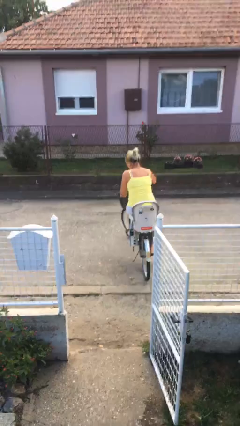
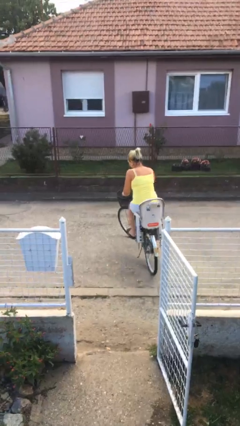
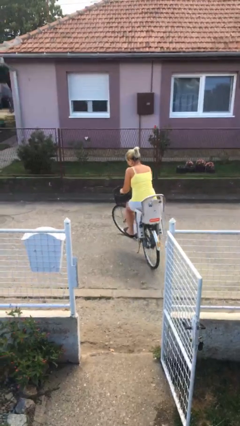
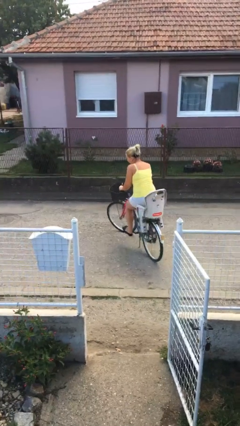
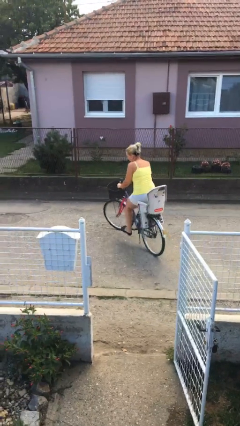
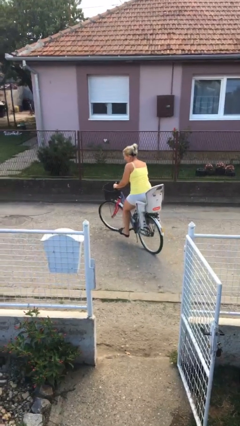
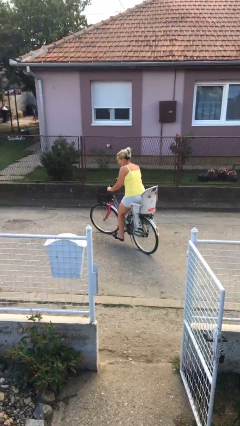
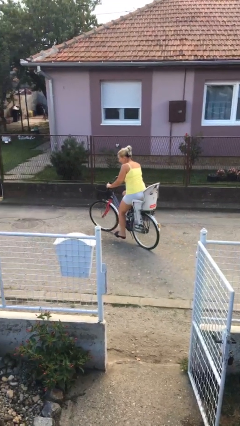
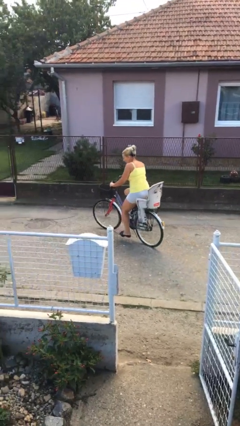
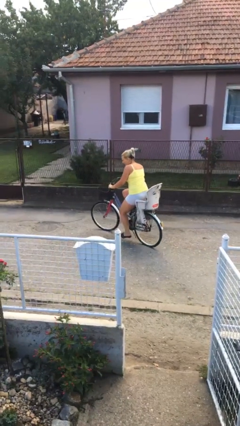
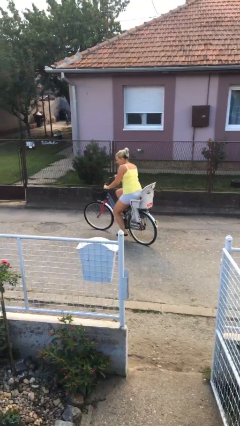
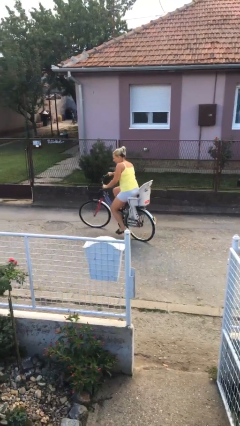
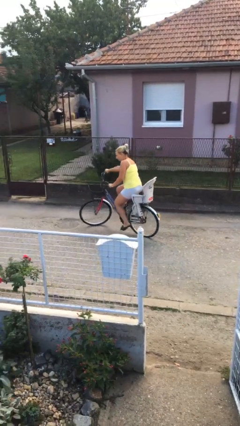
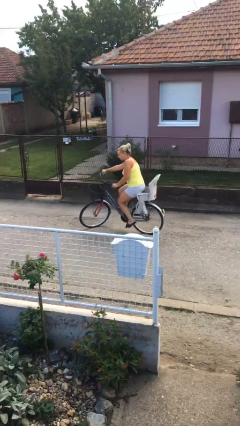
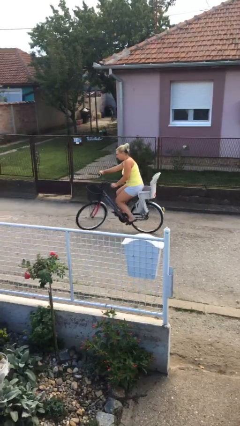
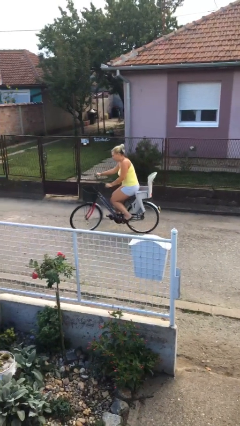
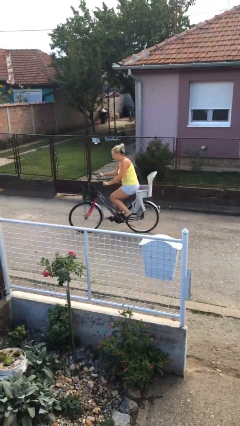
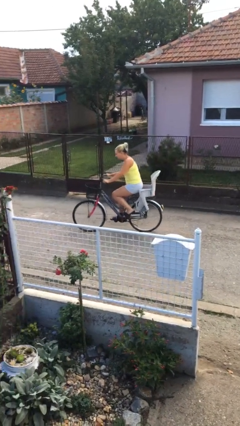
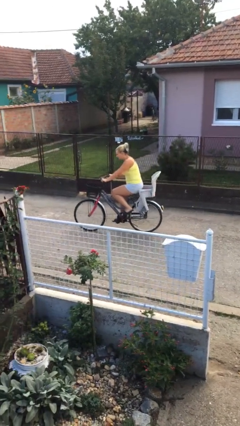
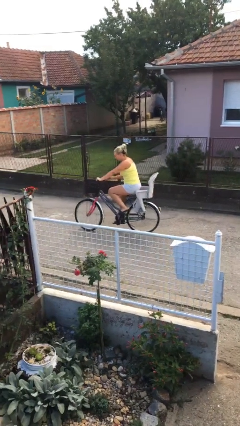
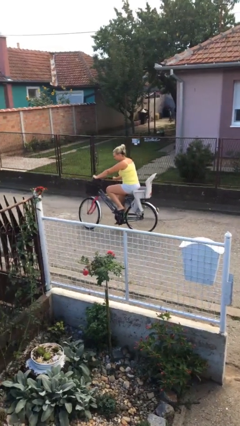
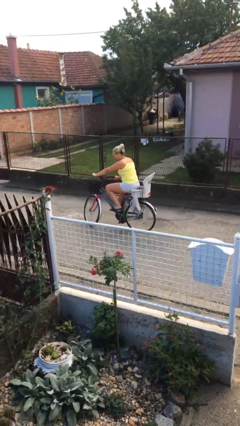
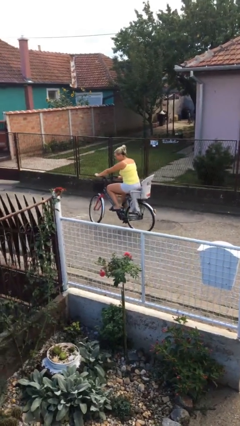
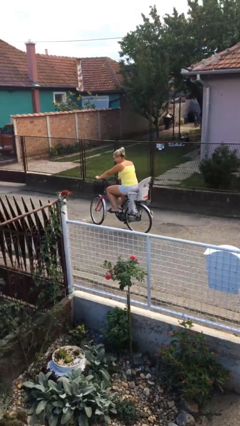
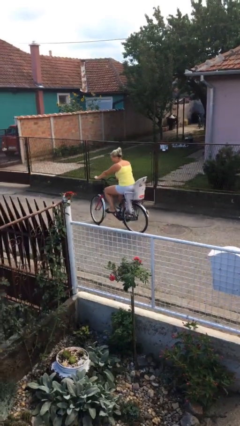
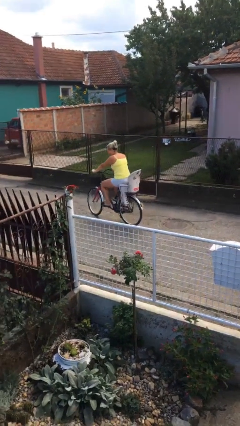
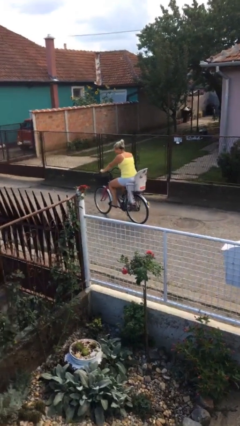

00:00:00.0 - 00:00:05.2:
person rides bicycle

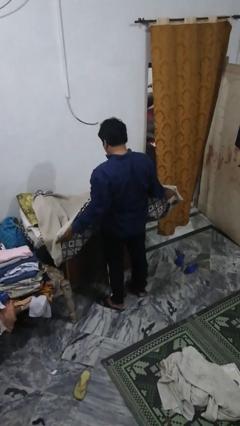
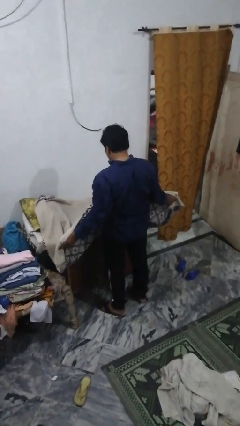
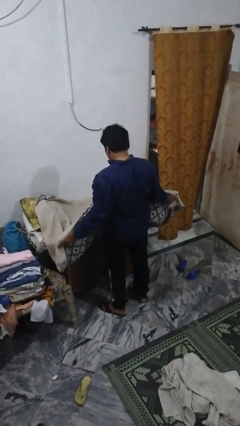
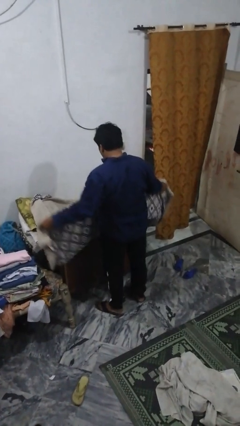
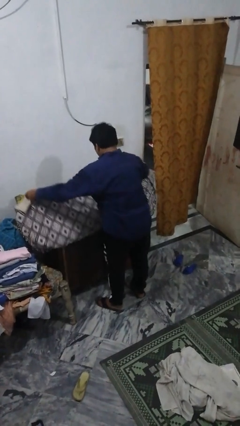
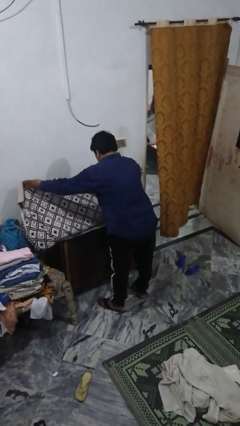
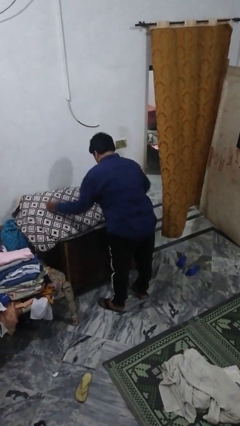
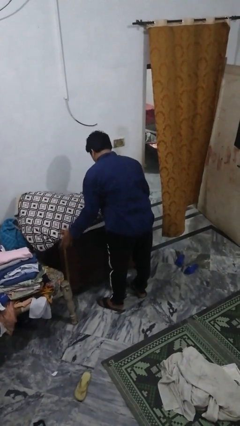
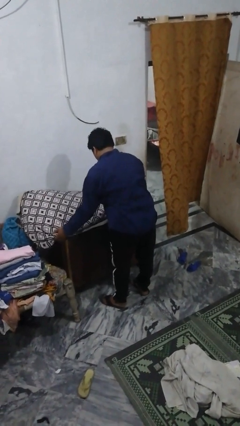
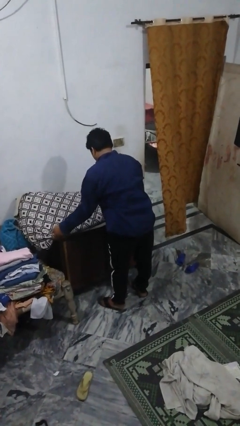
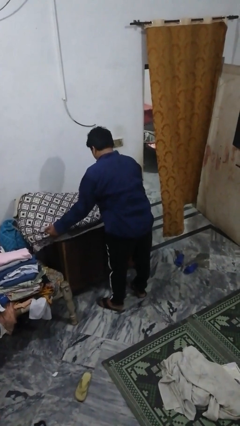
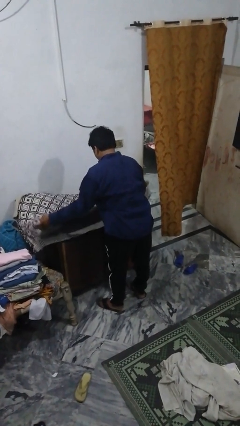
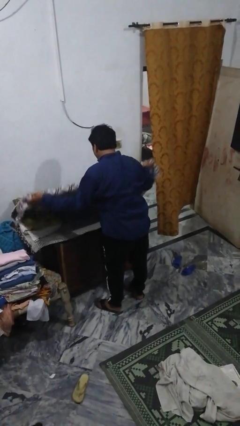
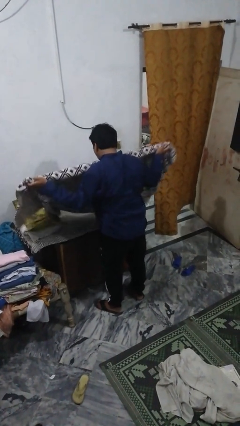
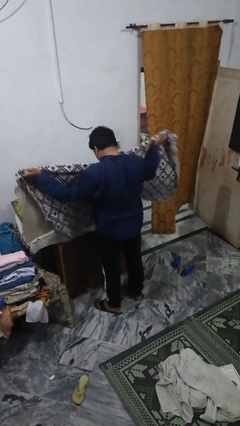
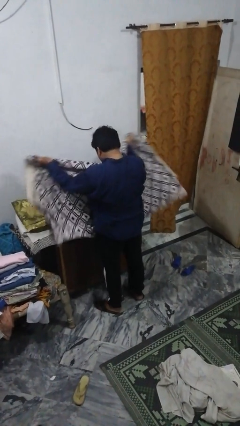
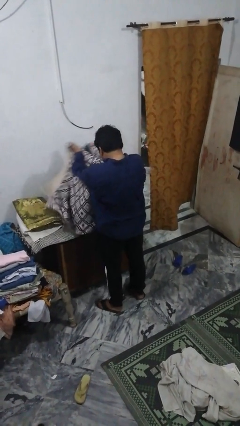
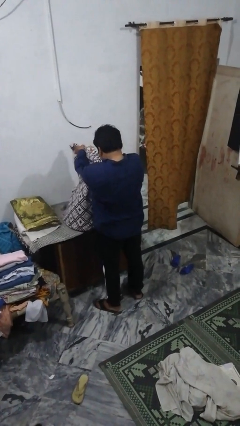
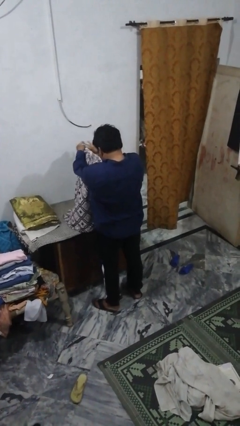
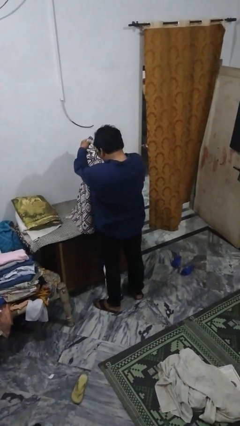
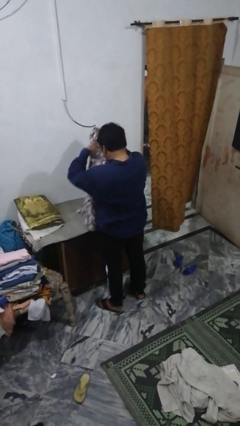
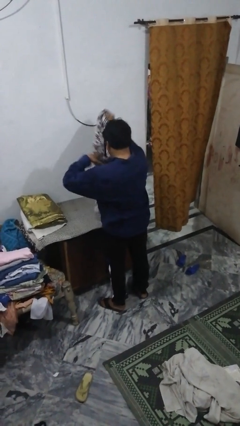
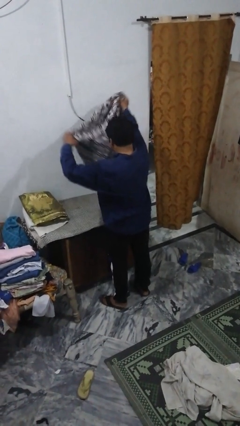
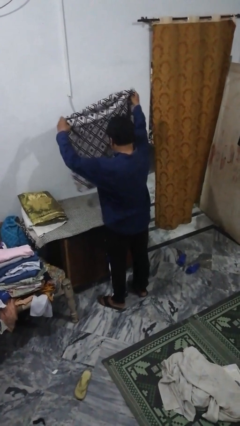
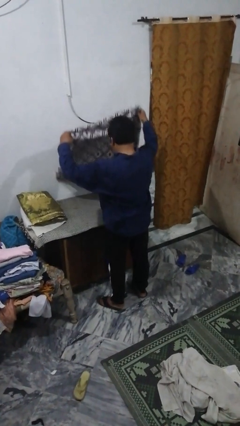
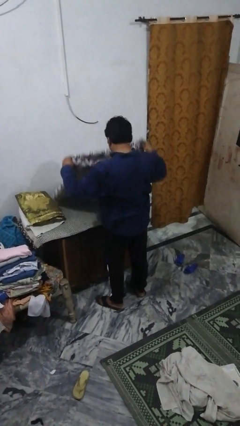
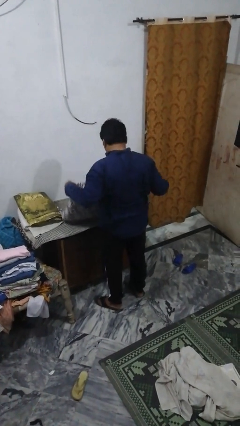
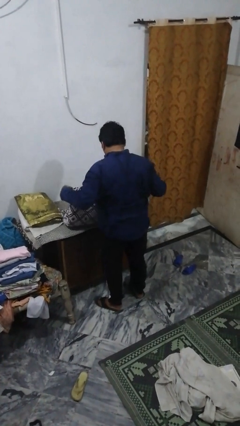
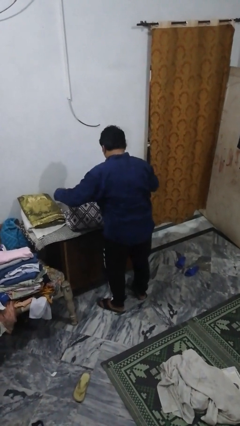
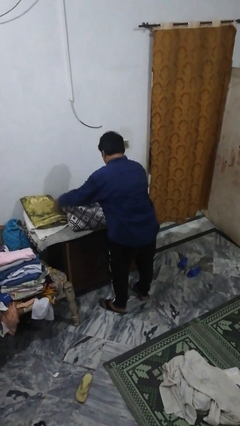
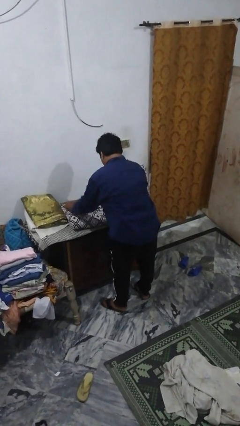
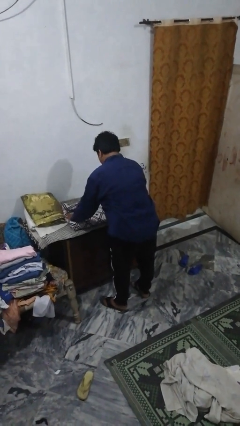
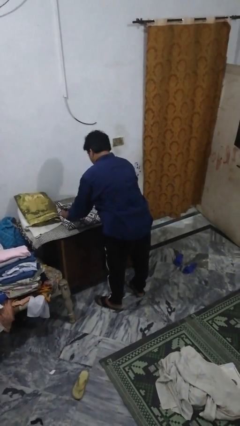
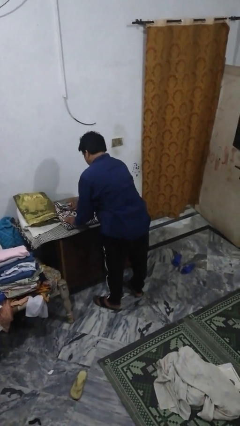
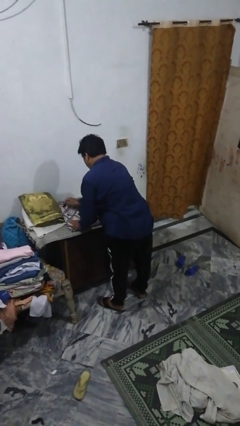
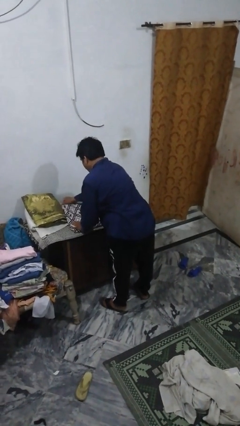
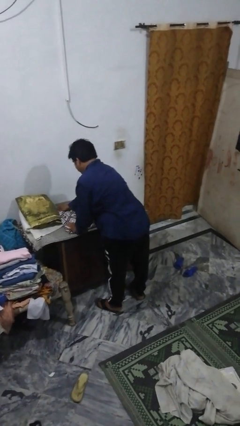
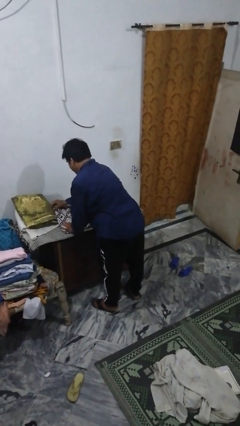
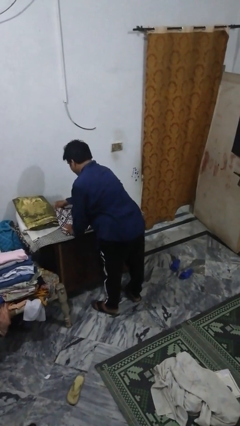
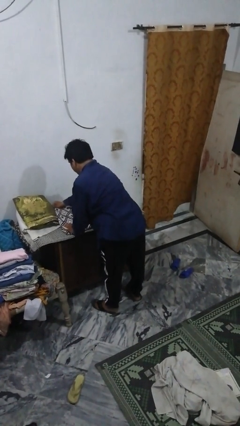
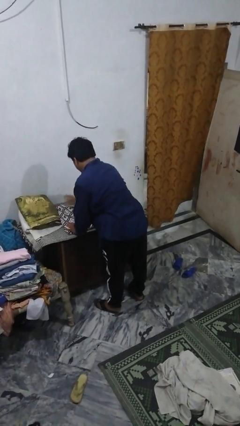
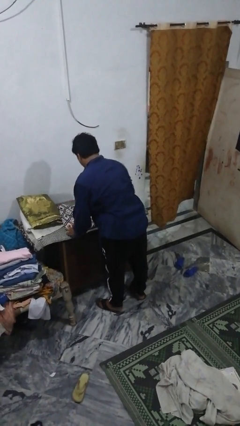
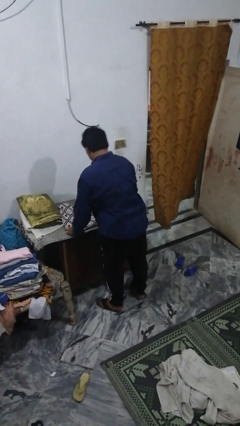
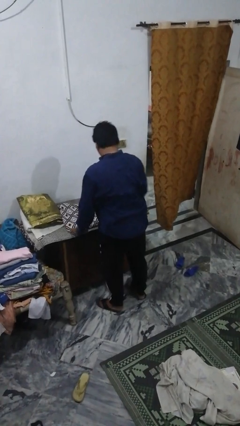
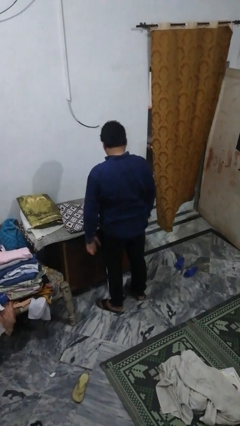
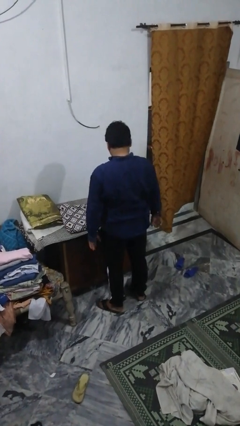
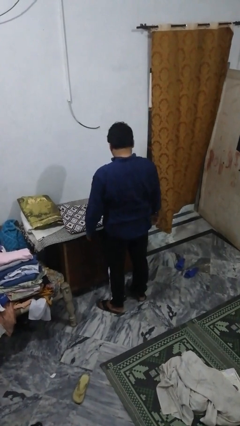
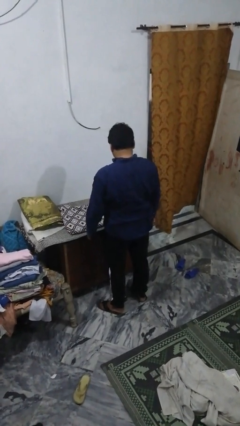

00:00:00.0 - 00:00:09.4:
person folds blanket

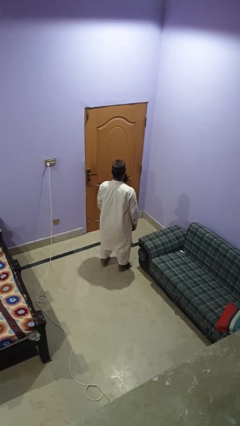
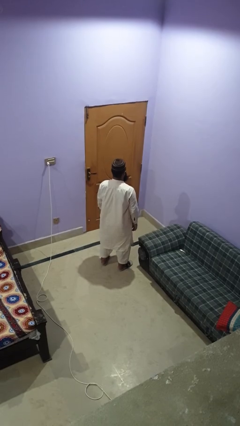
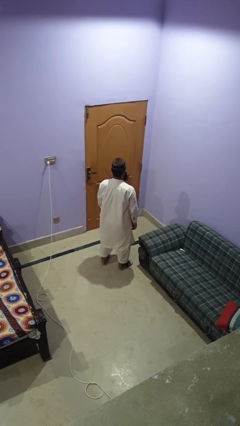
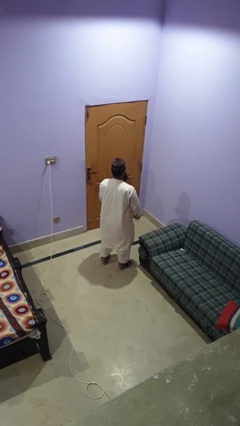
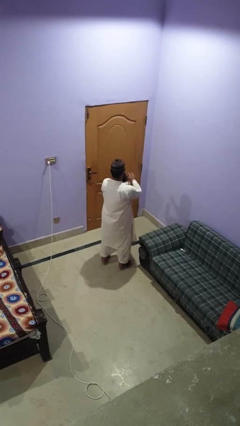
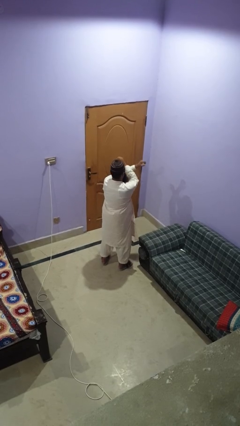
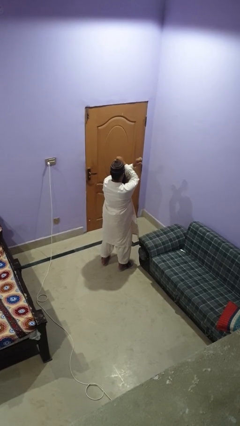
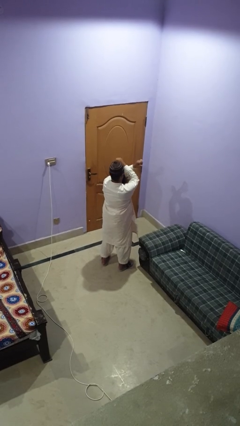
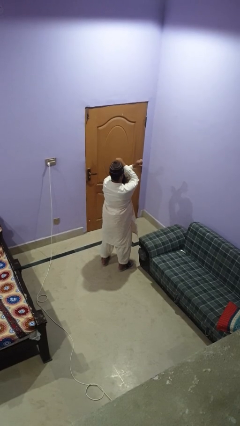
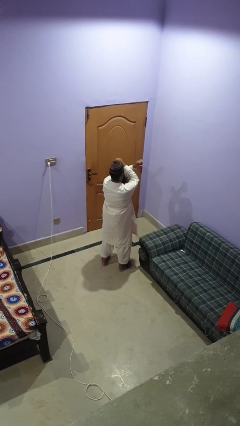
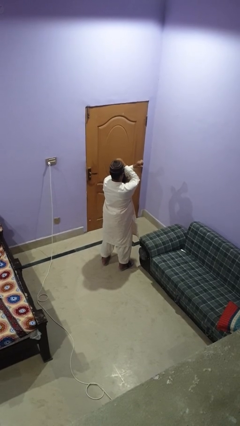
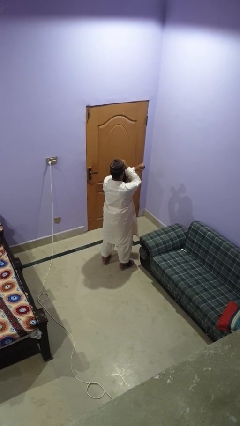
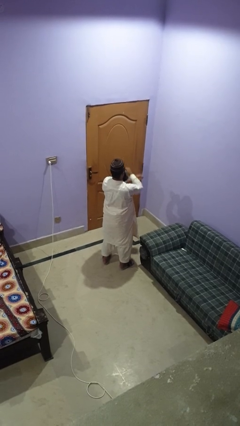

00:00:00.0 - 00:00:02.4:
person gestures arms x

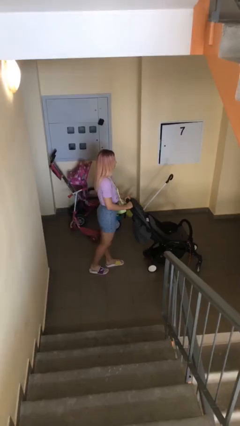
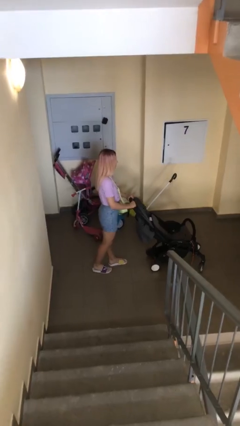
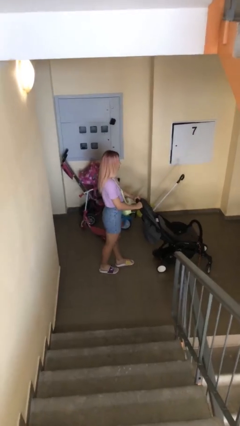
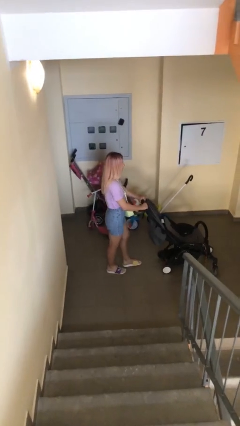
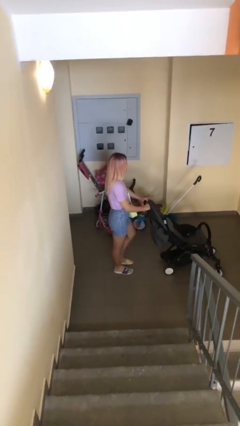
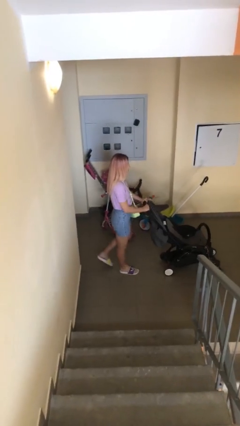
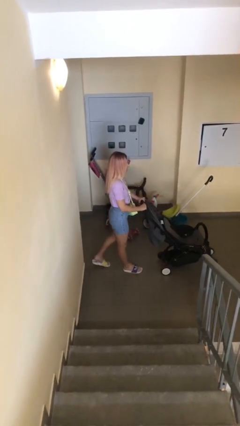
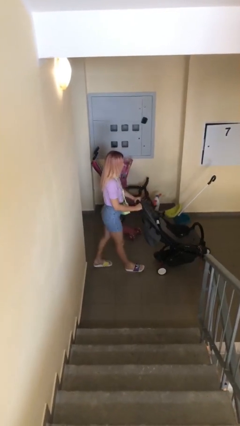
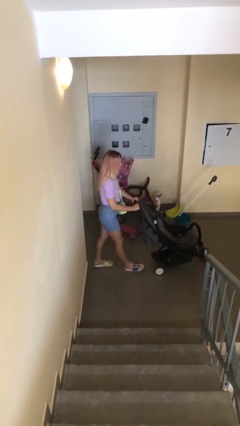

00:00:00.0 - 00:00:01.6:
person pulls wheeled cart
